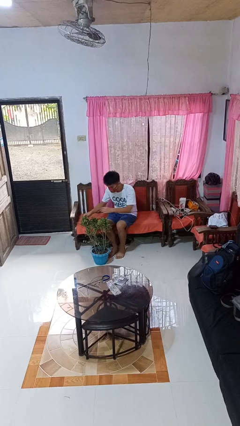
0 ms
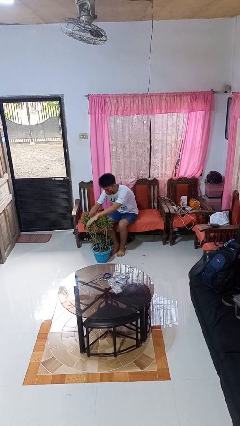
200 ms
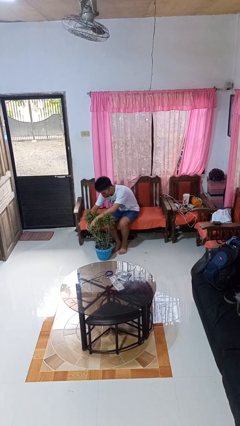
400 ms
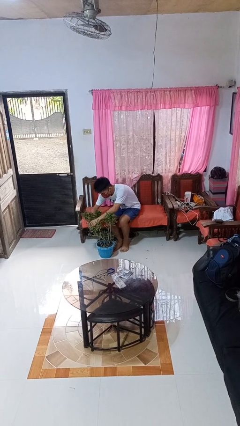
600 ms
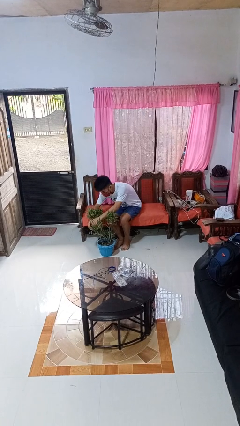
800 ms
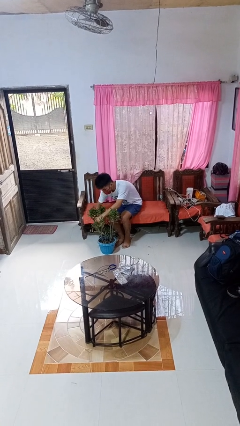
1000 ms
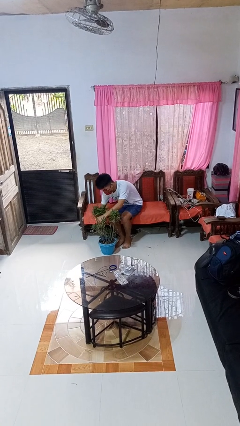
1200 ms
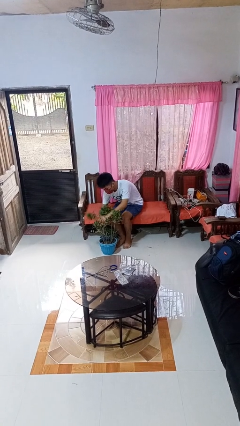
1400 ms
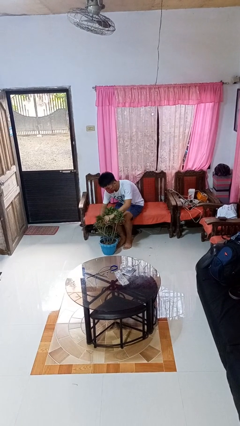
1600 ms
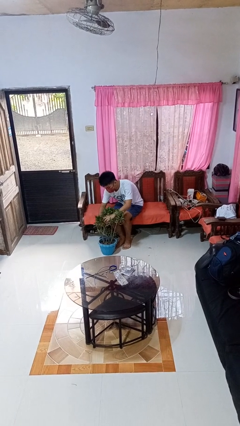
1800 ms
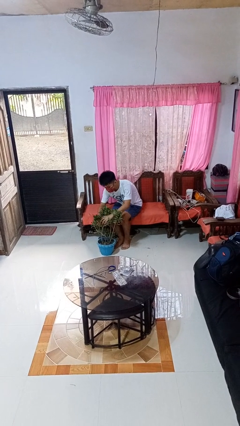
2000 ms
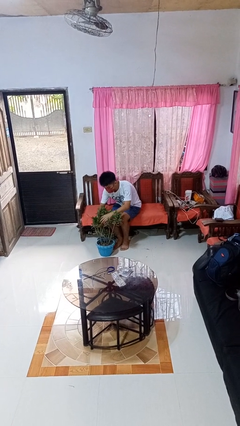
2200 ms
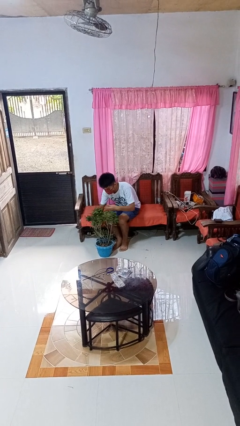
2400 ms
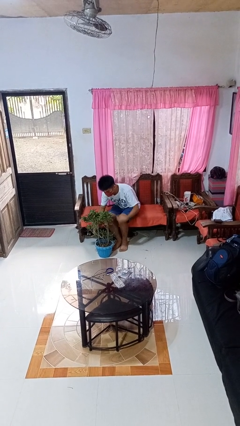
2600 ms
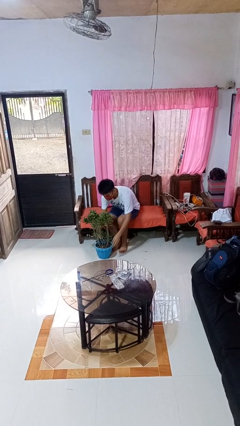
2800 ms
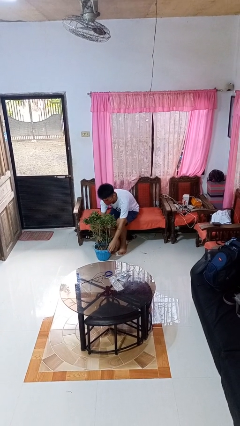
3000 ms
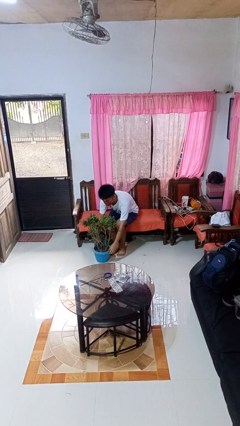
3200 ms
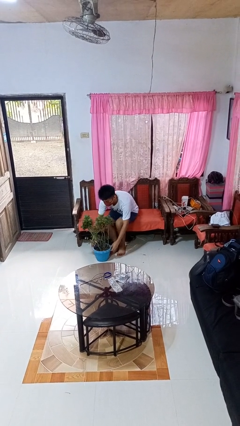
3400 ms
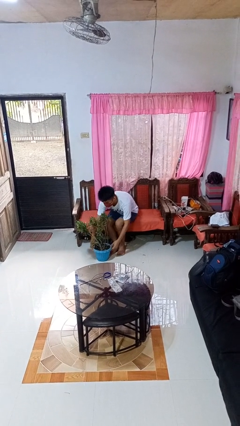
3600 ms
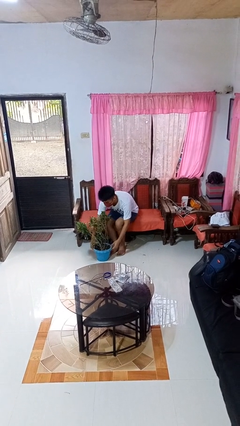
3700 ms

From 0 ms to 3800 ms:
person arranges flowers in vase

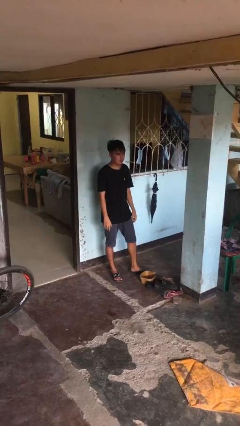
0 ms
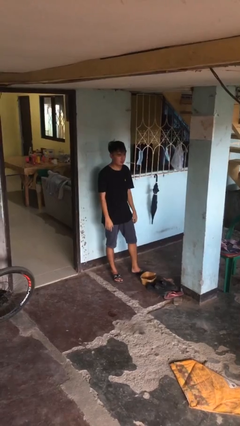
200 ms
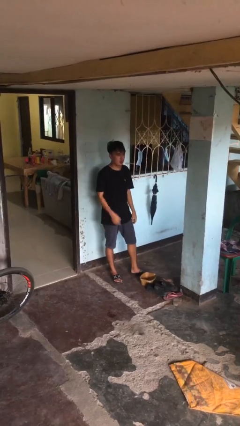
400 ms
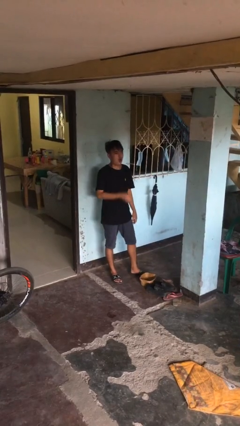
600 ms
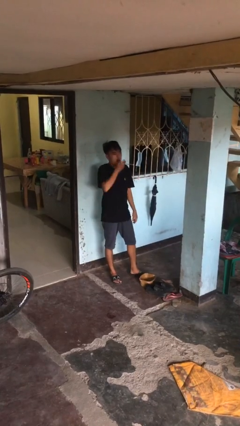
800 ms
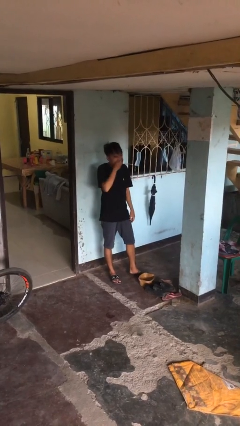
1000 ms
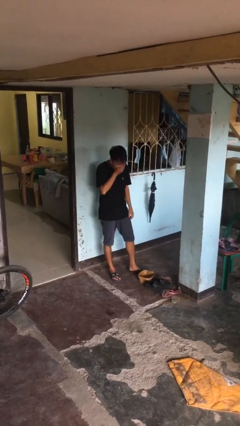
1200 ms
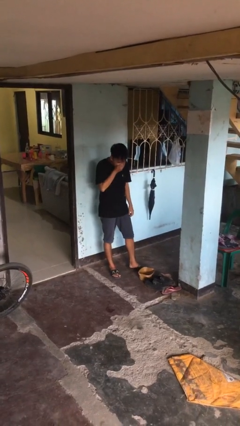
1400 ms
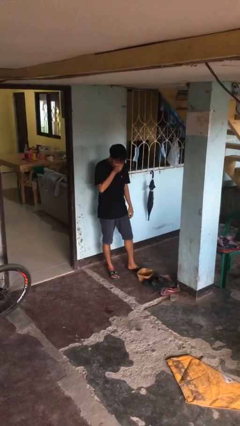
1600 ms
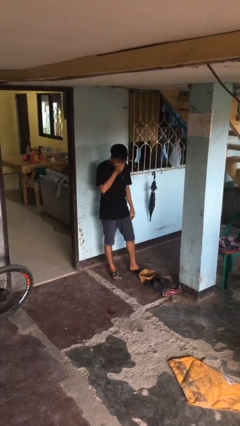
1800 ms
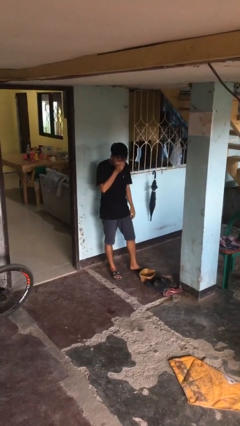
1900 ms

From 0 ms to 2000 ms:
person sneezes into hand

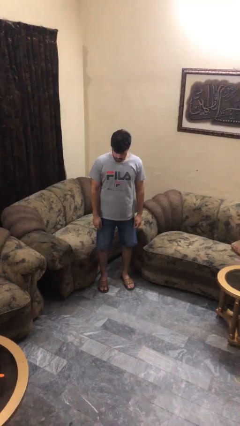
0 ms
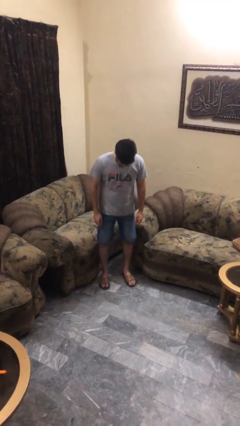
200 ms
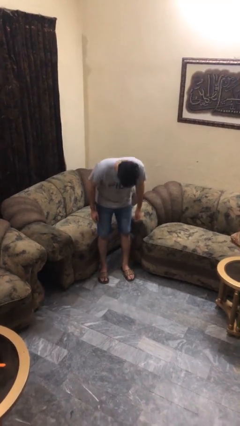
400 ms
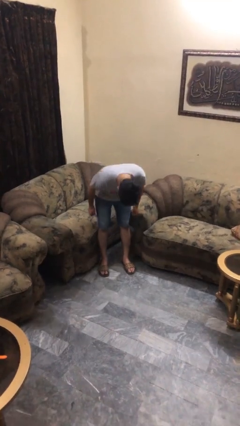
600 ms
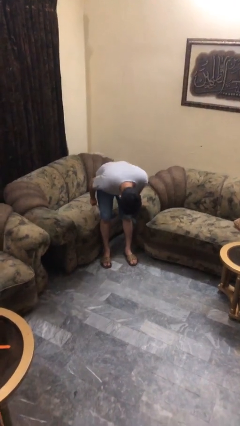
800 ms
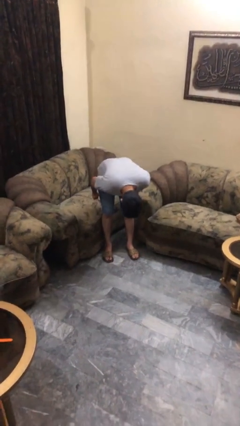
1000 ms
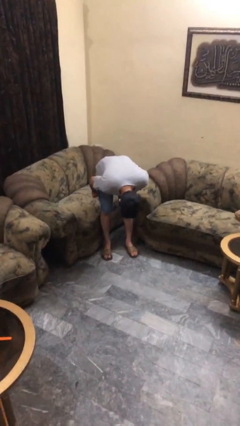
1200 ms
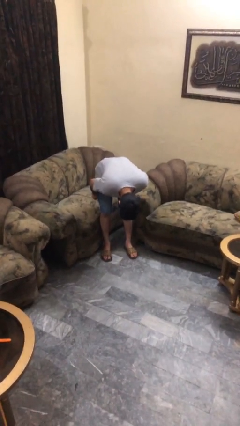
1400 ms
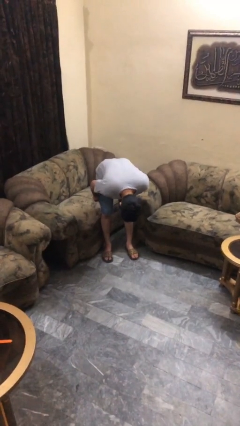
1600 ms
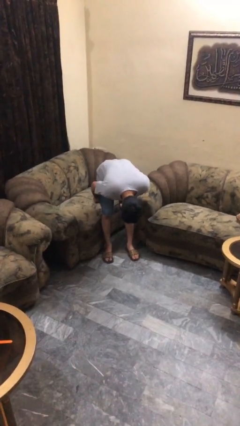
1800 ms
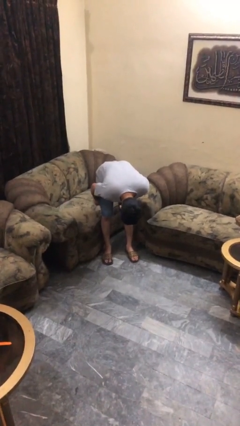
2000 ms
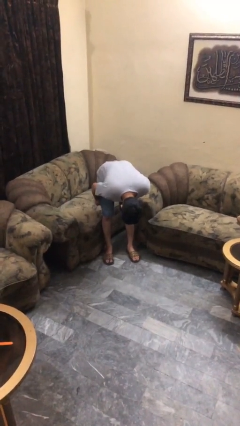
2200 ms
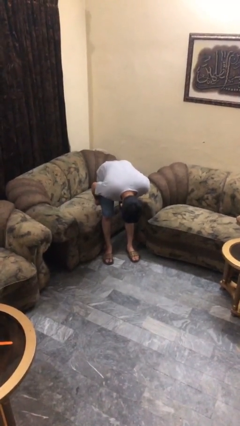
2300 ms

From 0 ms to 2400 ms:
person bows

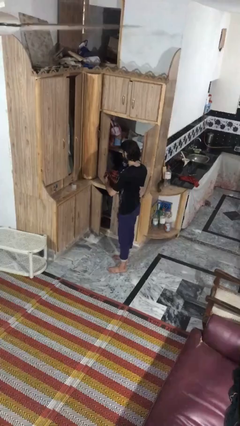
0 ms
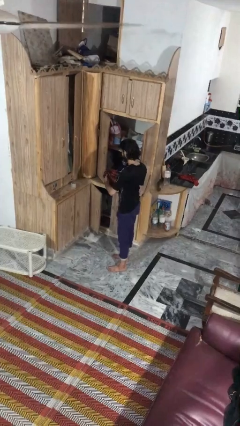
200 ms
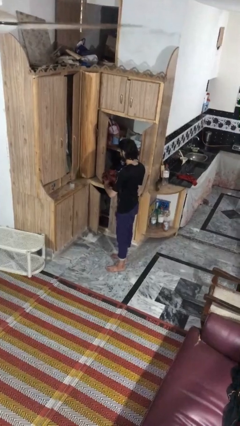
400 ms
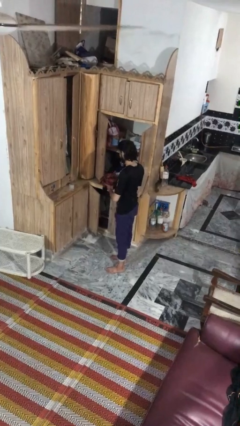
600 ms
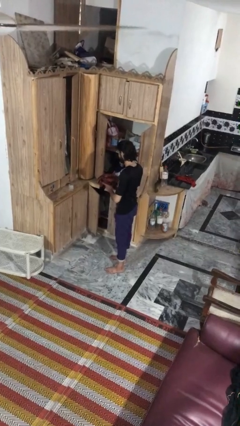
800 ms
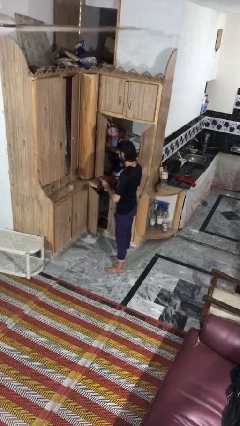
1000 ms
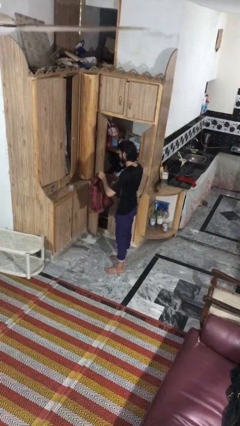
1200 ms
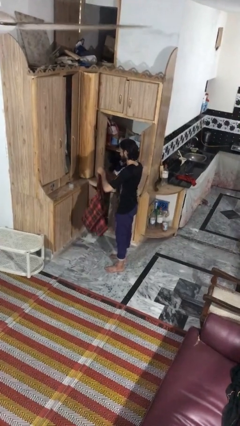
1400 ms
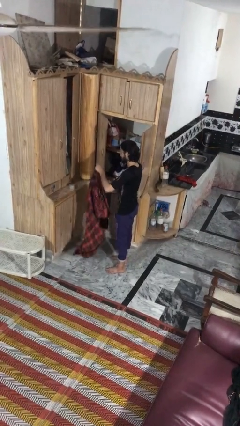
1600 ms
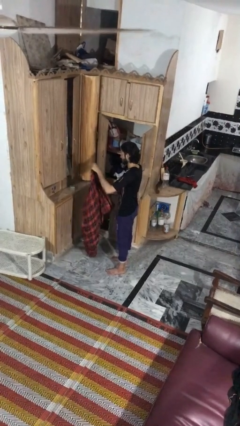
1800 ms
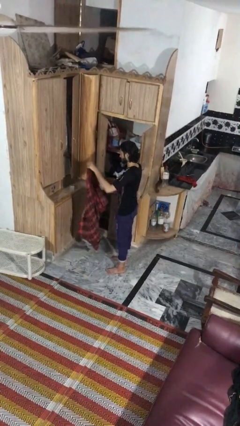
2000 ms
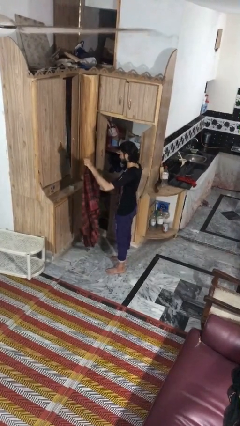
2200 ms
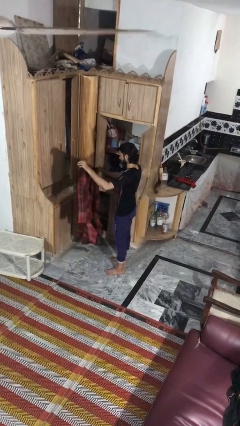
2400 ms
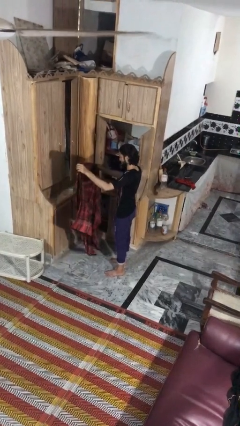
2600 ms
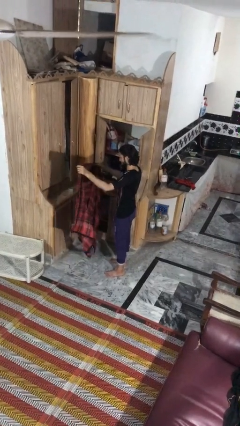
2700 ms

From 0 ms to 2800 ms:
person unfolds blanket

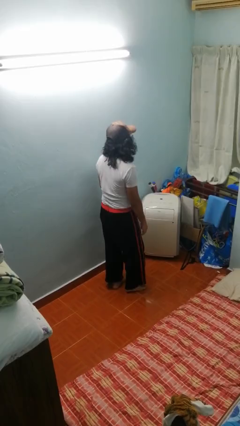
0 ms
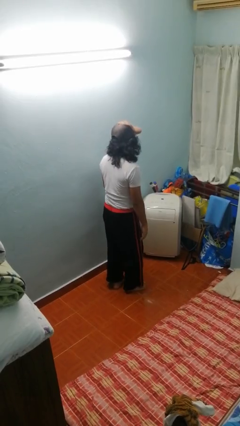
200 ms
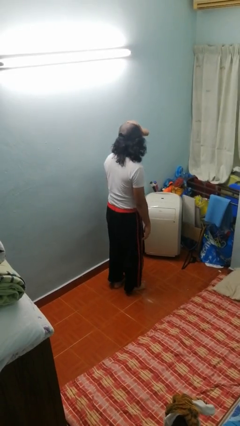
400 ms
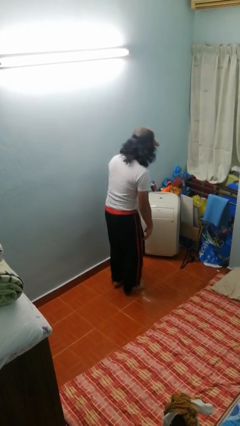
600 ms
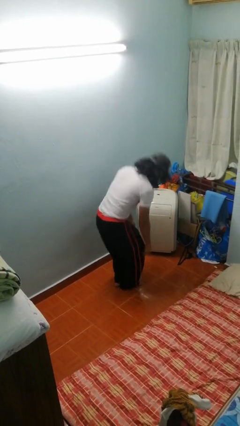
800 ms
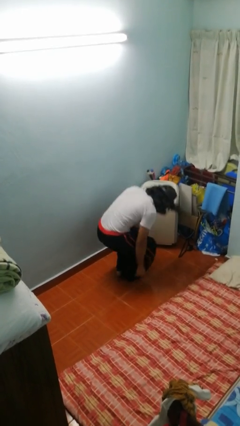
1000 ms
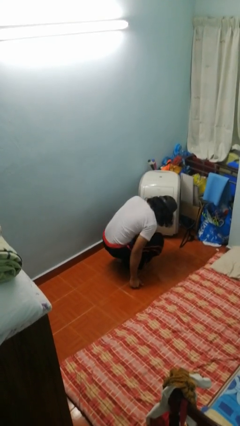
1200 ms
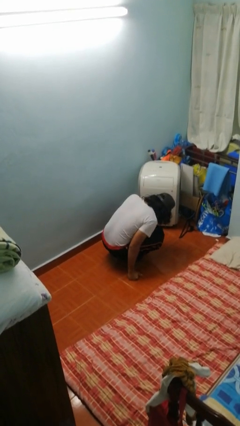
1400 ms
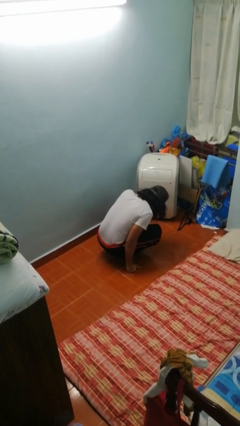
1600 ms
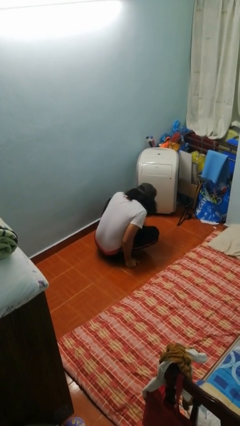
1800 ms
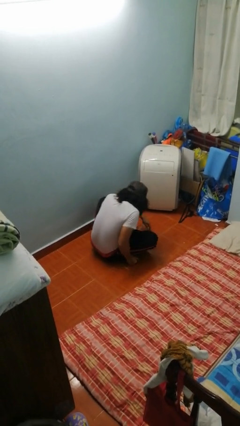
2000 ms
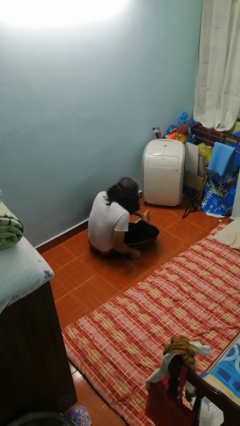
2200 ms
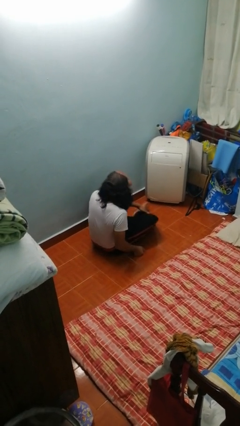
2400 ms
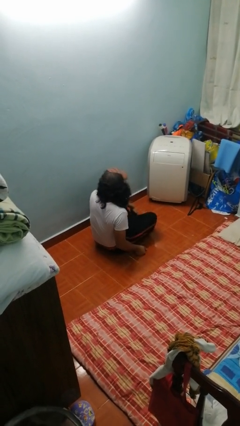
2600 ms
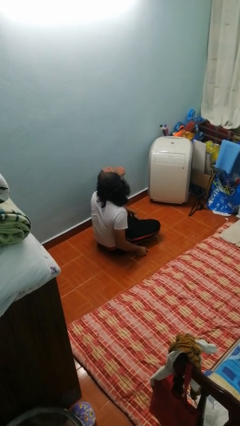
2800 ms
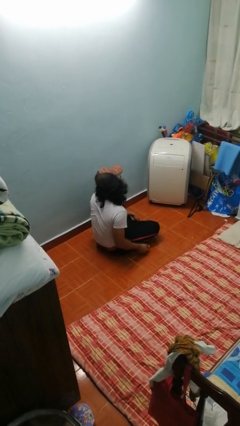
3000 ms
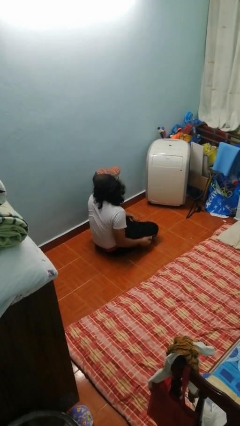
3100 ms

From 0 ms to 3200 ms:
person sits crisscross

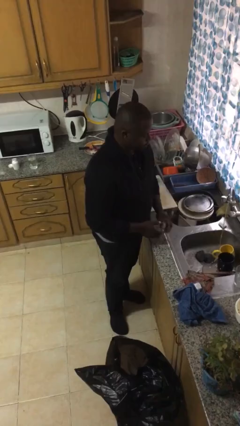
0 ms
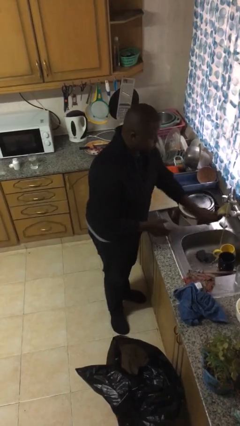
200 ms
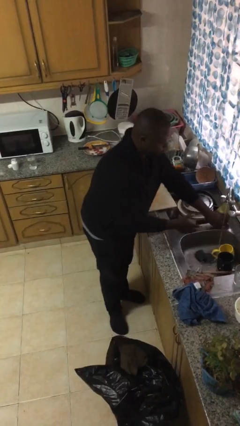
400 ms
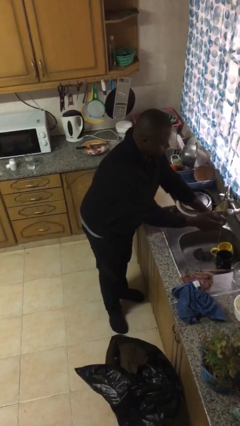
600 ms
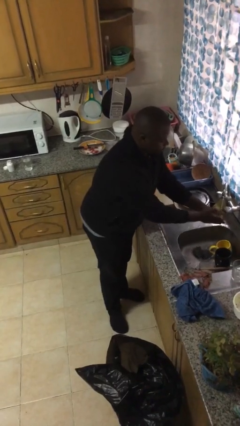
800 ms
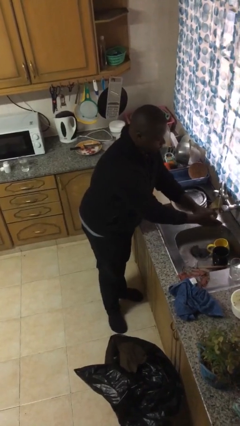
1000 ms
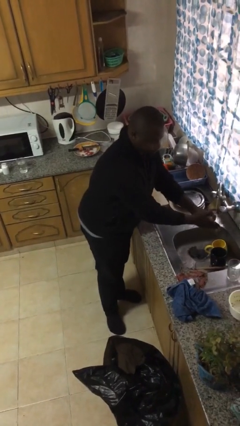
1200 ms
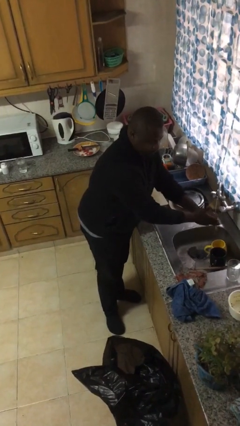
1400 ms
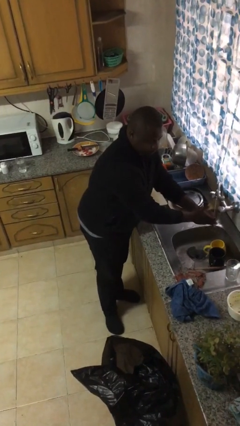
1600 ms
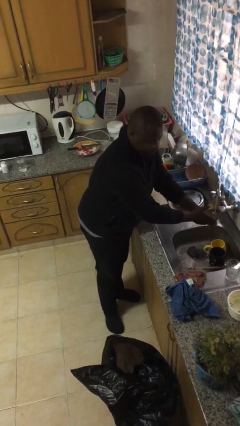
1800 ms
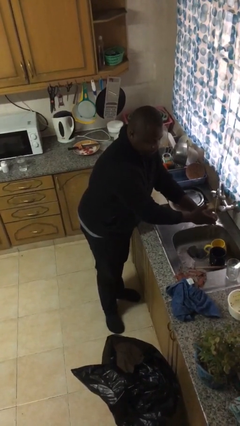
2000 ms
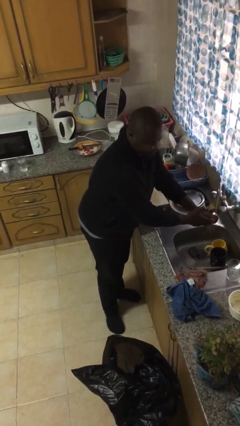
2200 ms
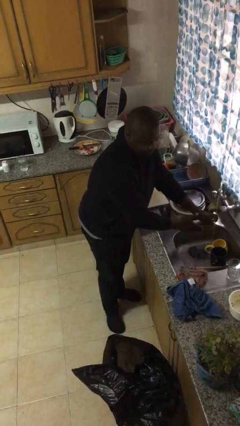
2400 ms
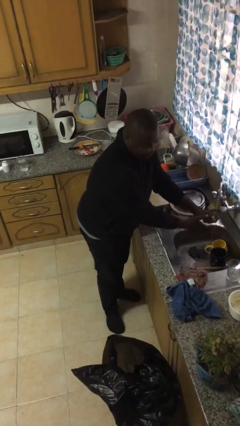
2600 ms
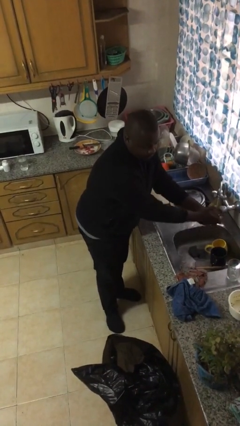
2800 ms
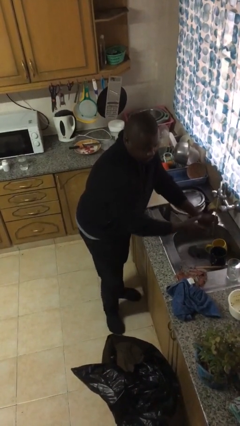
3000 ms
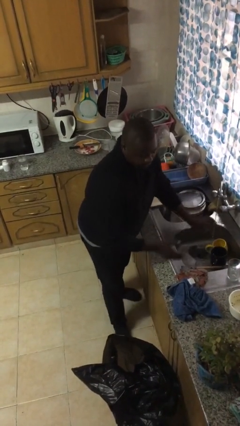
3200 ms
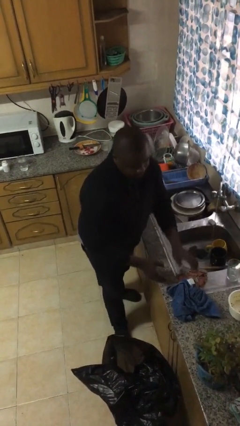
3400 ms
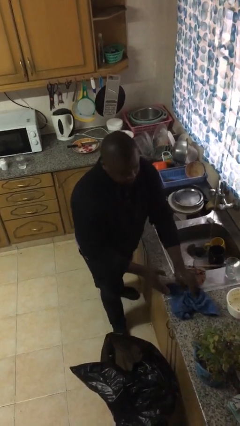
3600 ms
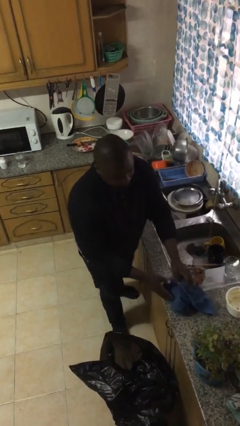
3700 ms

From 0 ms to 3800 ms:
person washes hands
